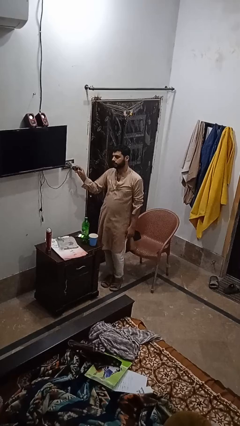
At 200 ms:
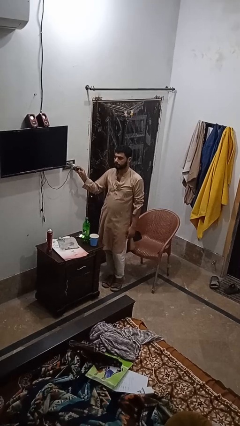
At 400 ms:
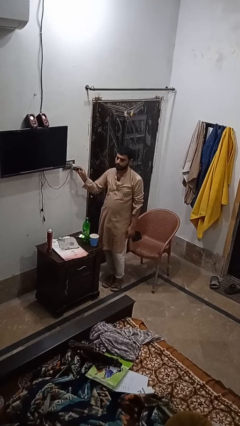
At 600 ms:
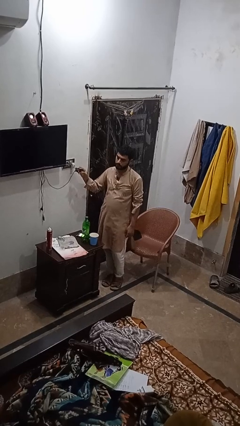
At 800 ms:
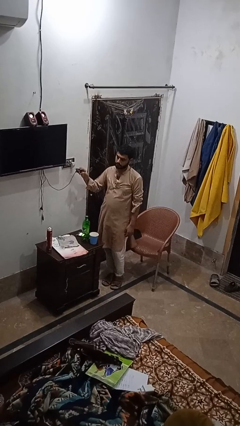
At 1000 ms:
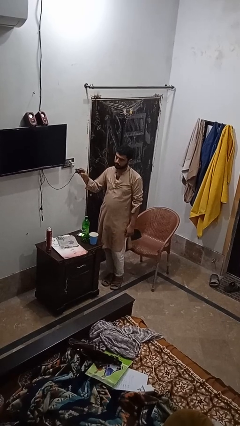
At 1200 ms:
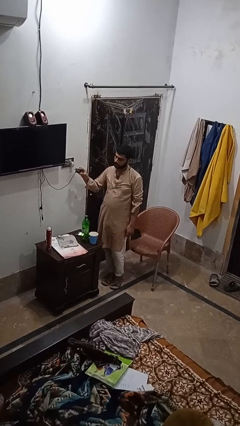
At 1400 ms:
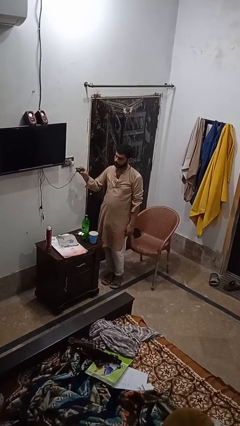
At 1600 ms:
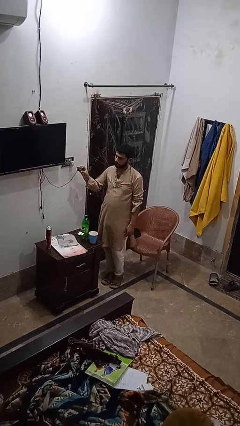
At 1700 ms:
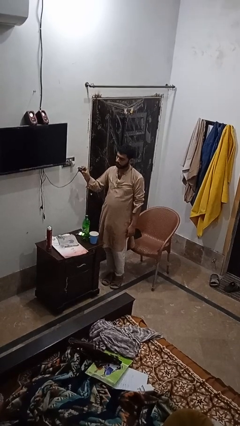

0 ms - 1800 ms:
person unplugs from electrical socket

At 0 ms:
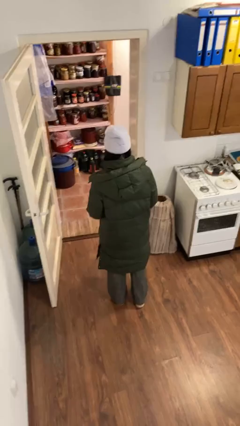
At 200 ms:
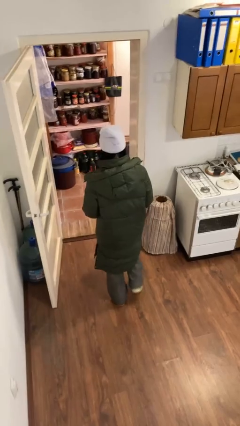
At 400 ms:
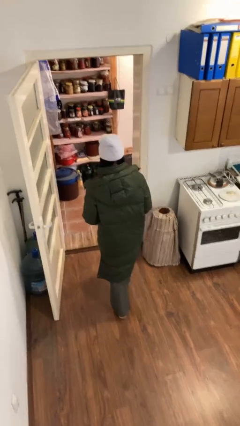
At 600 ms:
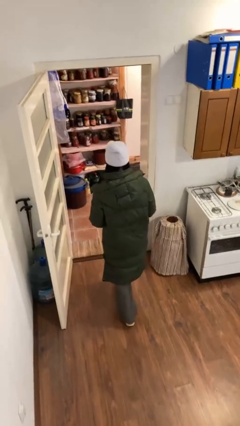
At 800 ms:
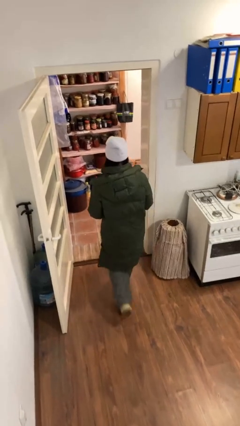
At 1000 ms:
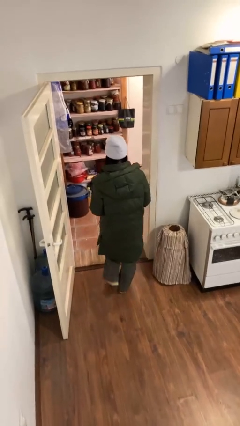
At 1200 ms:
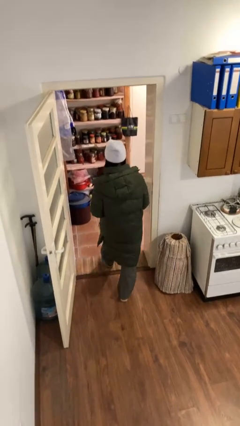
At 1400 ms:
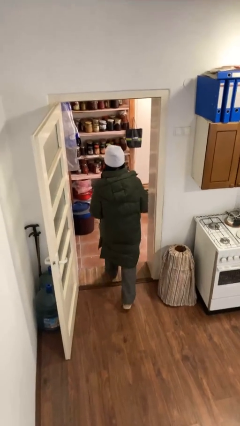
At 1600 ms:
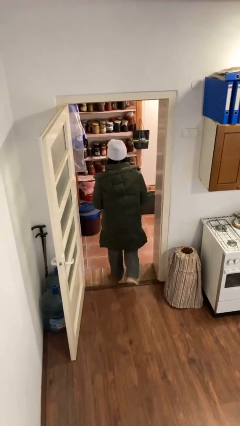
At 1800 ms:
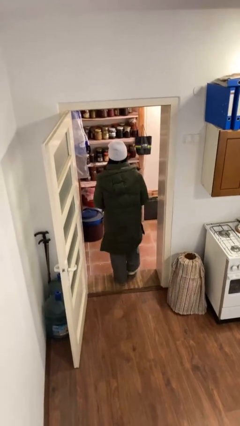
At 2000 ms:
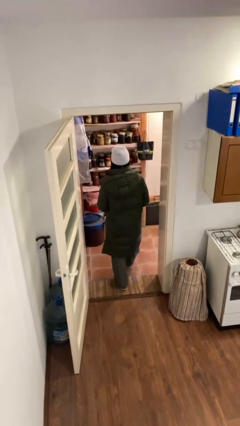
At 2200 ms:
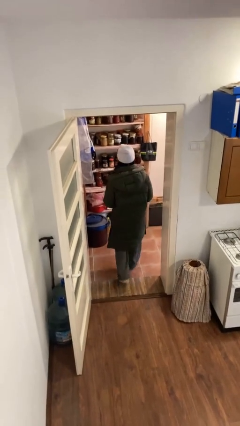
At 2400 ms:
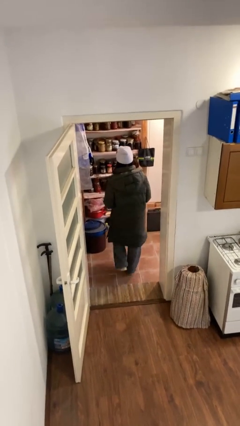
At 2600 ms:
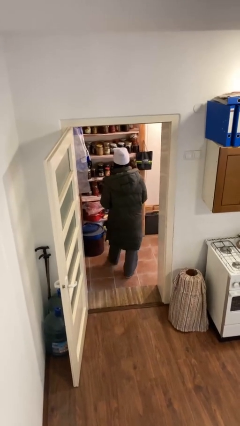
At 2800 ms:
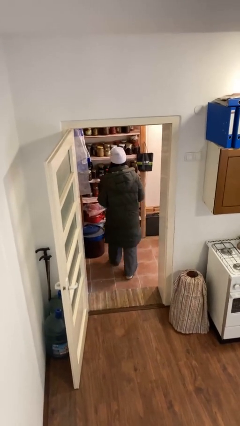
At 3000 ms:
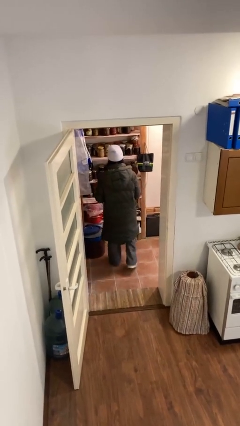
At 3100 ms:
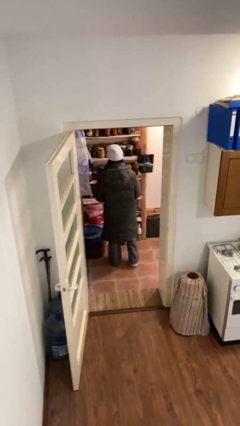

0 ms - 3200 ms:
person exits scene through structure

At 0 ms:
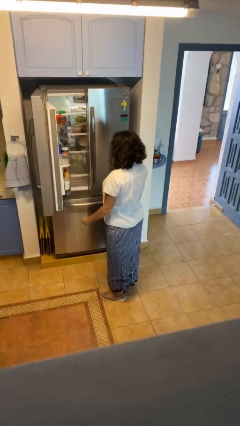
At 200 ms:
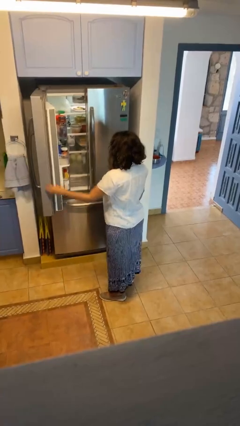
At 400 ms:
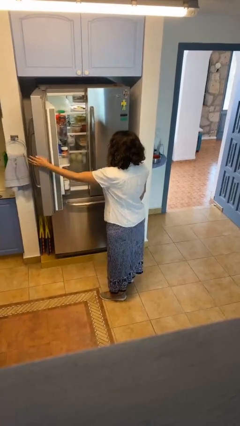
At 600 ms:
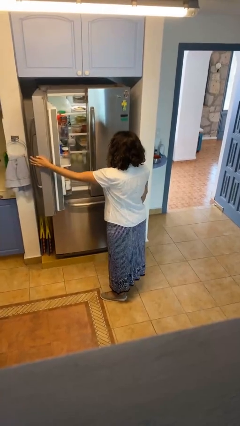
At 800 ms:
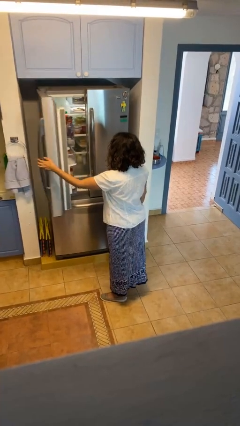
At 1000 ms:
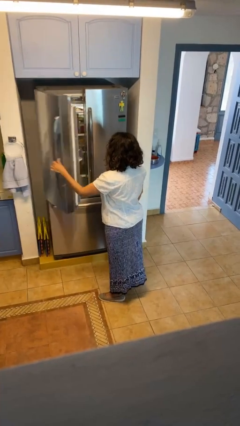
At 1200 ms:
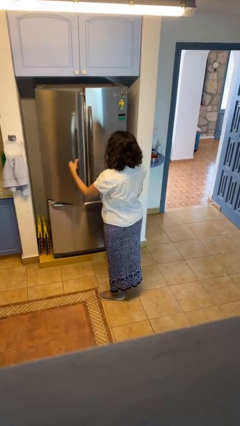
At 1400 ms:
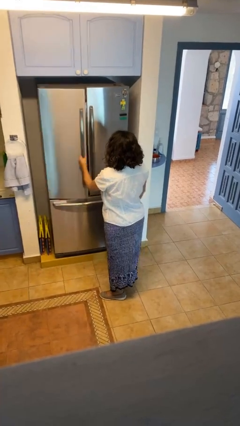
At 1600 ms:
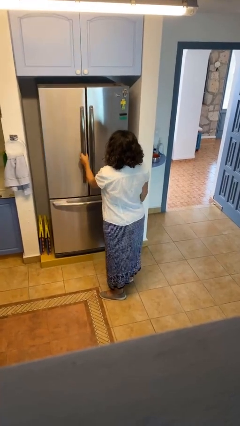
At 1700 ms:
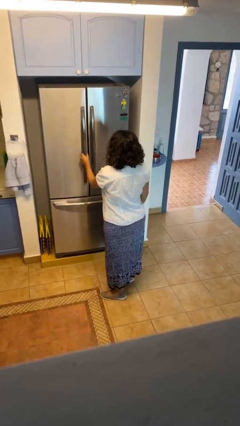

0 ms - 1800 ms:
person closes refrigerator

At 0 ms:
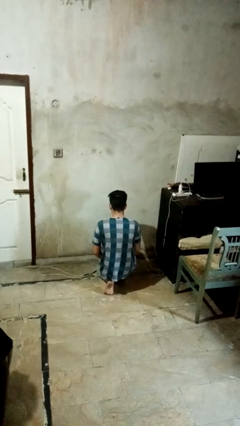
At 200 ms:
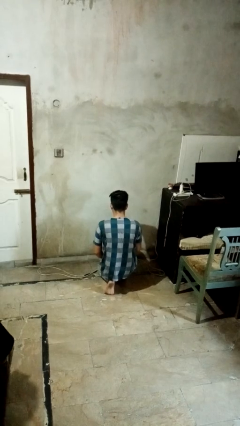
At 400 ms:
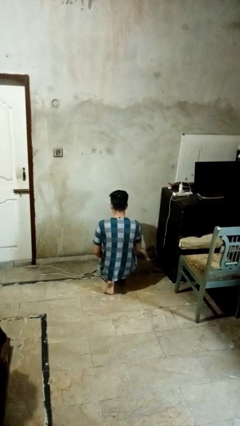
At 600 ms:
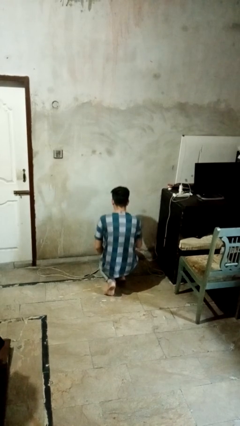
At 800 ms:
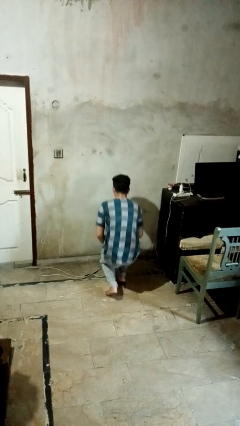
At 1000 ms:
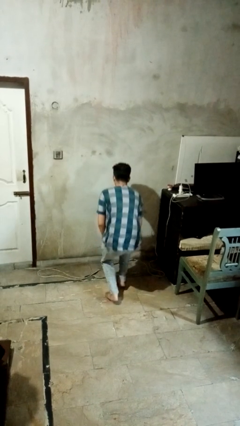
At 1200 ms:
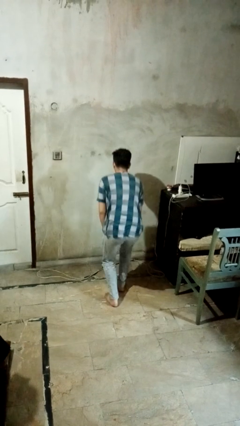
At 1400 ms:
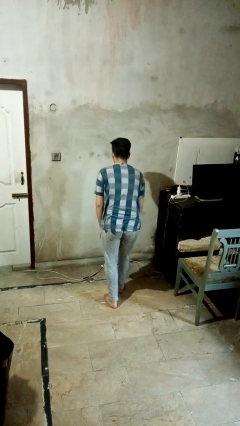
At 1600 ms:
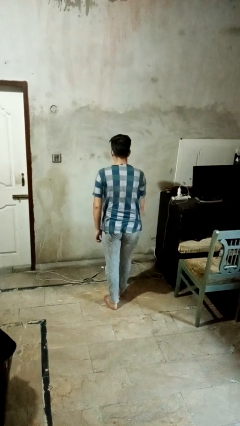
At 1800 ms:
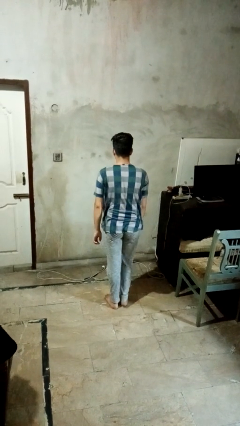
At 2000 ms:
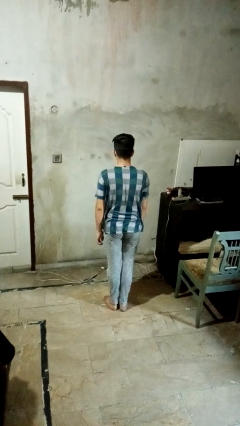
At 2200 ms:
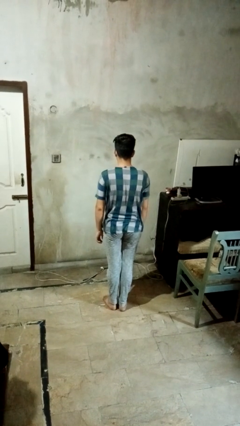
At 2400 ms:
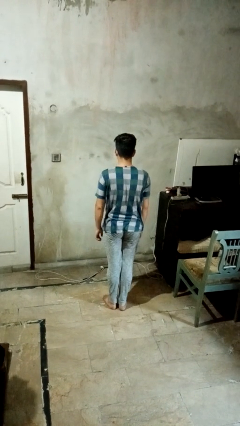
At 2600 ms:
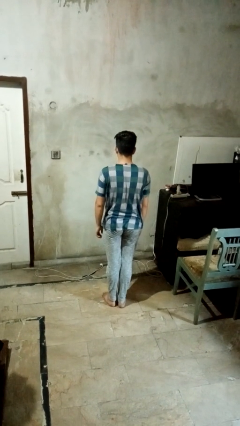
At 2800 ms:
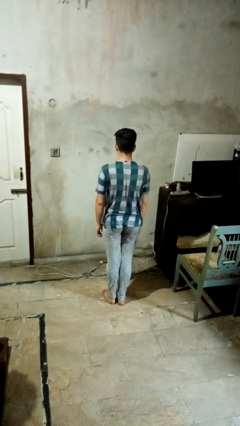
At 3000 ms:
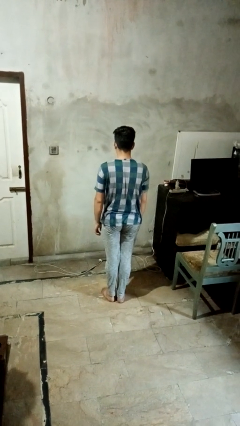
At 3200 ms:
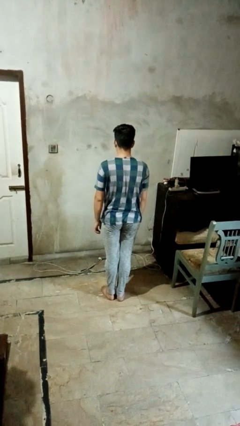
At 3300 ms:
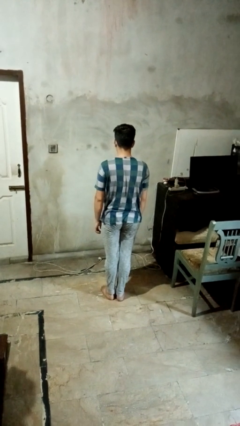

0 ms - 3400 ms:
person stands up from floor

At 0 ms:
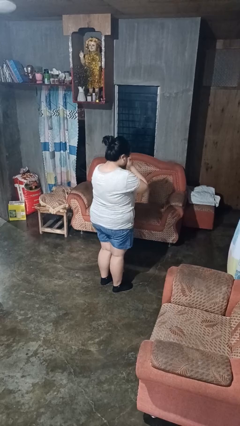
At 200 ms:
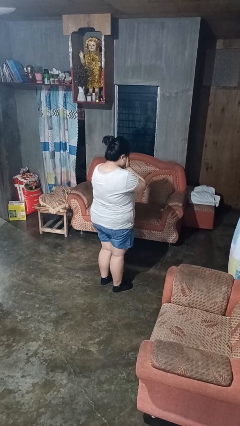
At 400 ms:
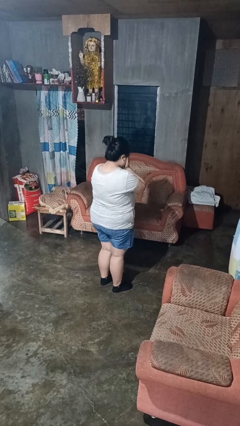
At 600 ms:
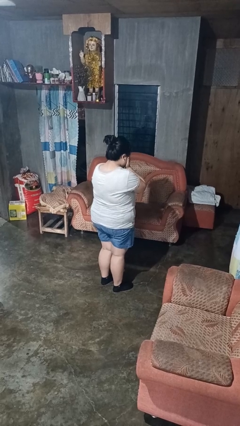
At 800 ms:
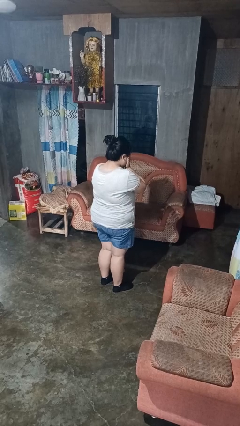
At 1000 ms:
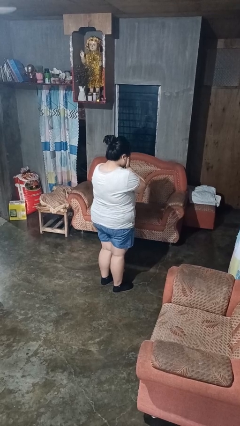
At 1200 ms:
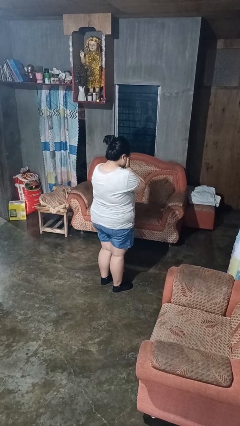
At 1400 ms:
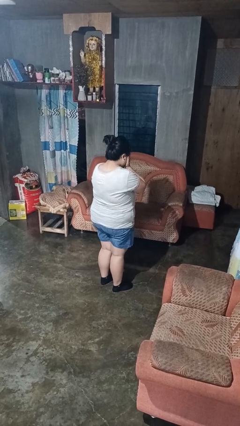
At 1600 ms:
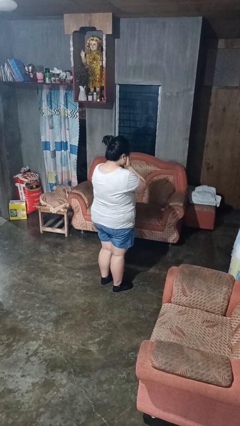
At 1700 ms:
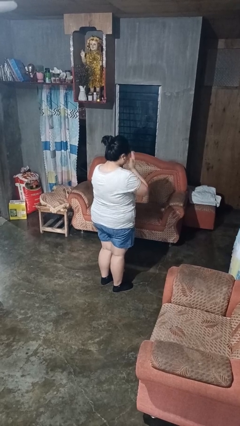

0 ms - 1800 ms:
person covers face with hands

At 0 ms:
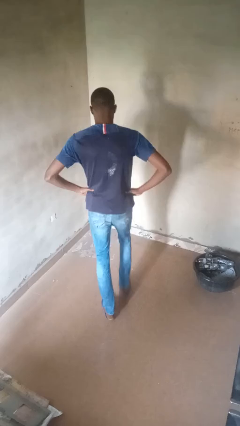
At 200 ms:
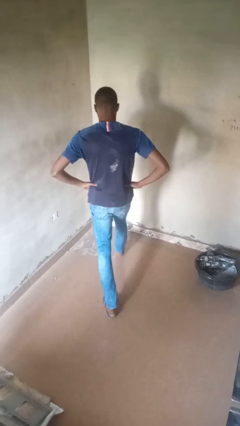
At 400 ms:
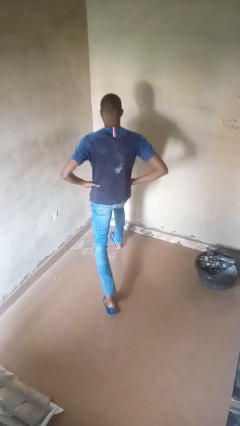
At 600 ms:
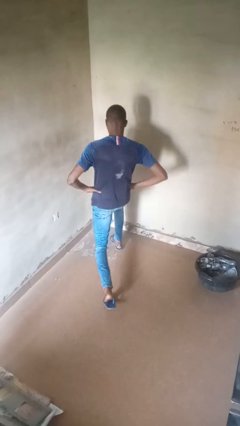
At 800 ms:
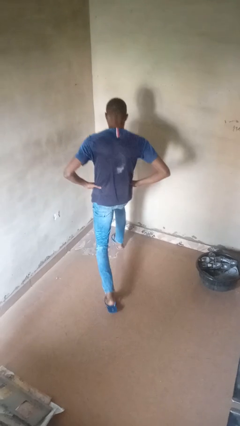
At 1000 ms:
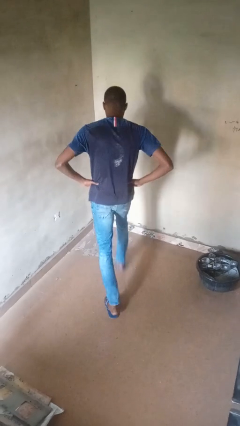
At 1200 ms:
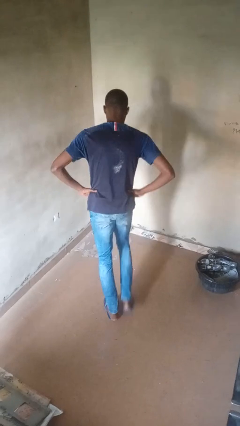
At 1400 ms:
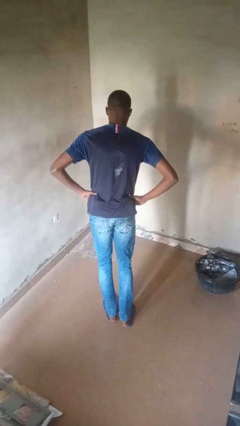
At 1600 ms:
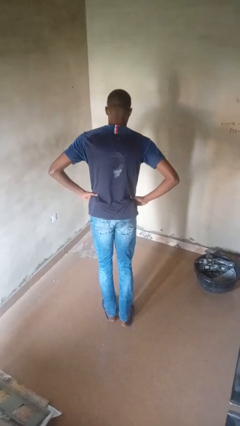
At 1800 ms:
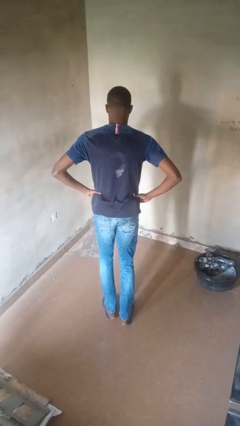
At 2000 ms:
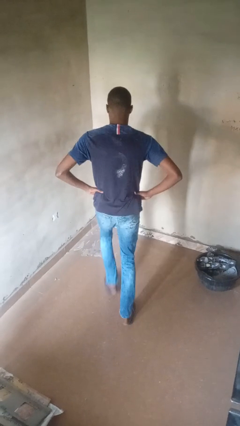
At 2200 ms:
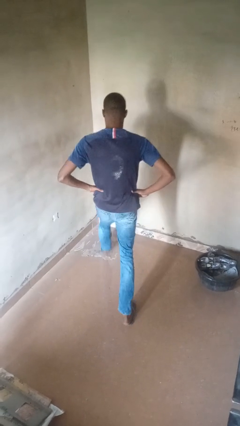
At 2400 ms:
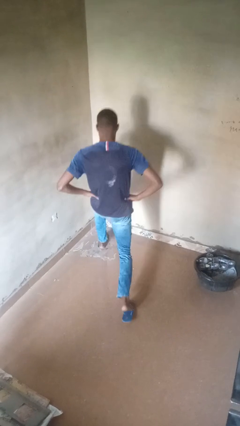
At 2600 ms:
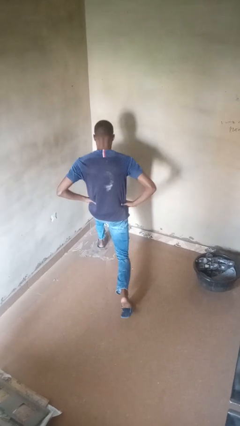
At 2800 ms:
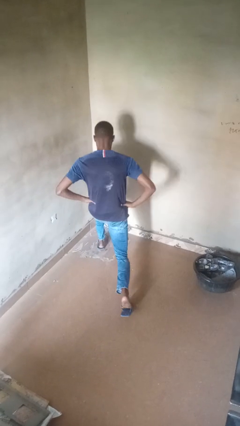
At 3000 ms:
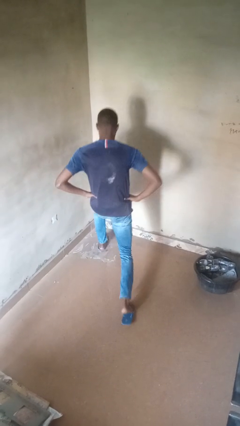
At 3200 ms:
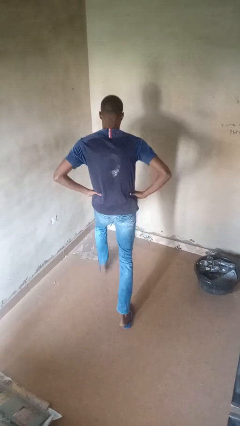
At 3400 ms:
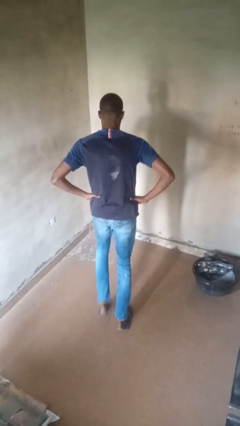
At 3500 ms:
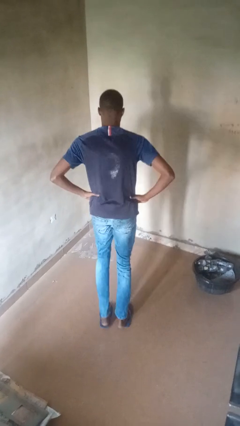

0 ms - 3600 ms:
person exercises with lunges

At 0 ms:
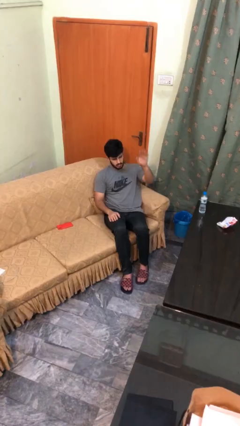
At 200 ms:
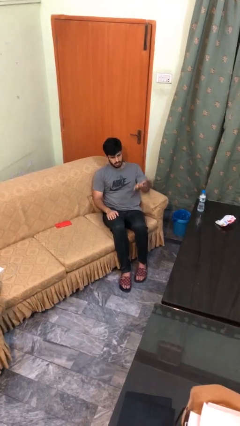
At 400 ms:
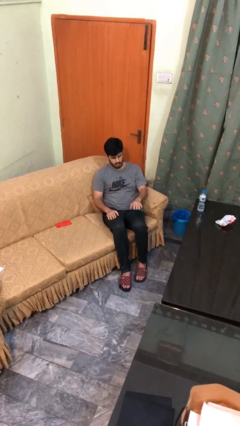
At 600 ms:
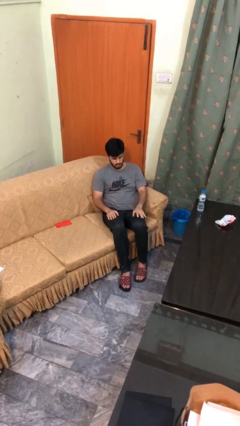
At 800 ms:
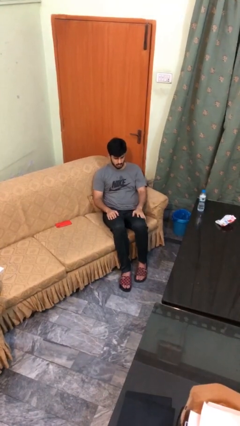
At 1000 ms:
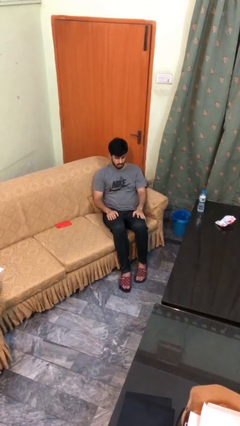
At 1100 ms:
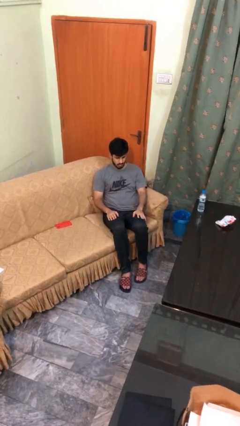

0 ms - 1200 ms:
person gestures lower hand
